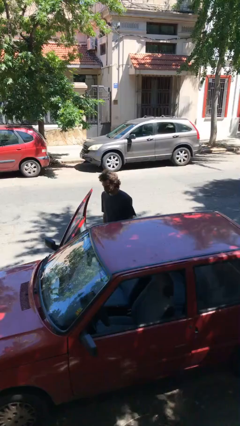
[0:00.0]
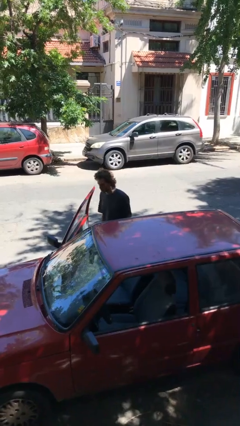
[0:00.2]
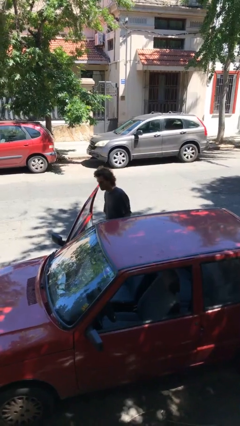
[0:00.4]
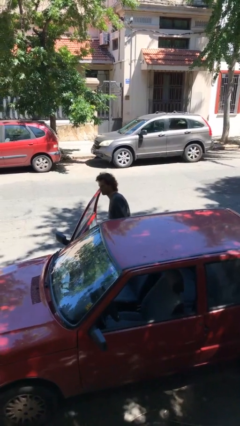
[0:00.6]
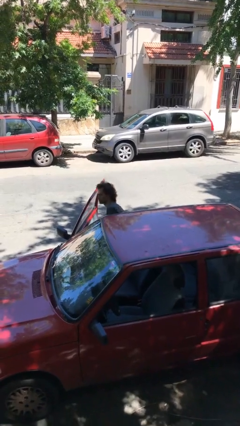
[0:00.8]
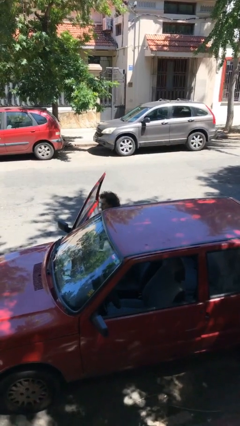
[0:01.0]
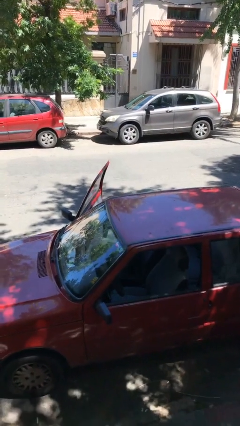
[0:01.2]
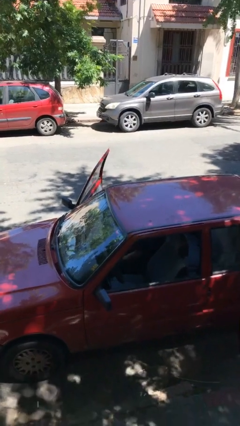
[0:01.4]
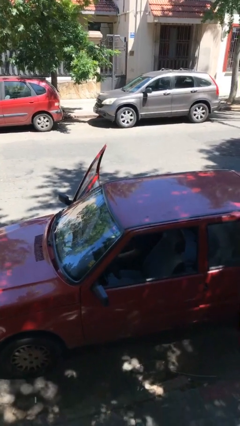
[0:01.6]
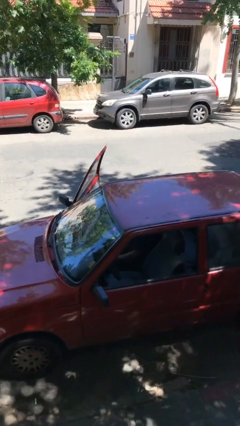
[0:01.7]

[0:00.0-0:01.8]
person enters car

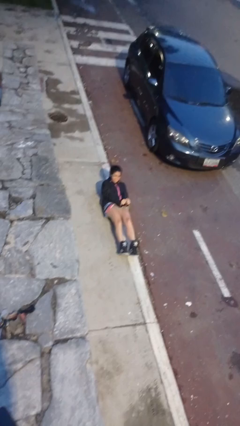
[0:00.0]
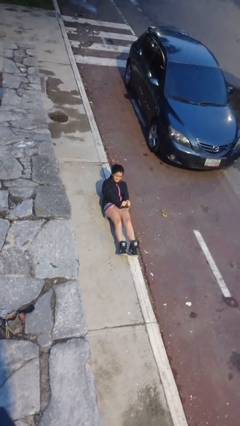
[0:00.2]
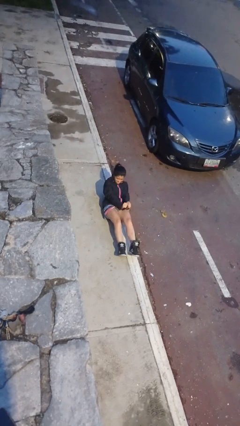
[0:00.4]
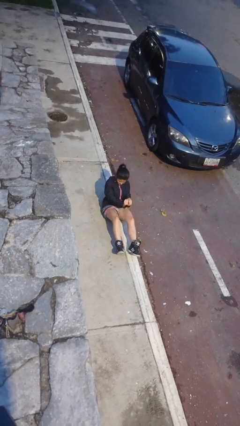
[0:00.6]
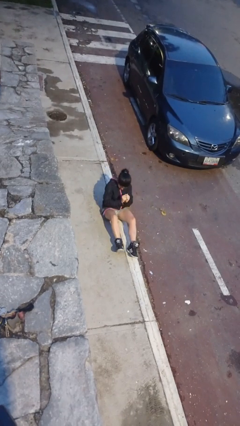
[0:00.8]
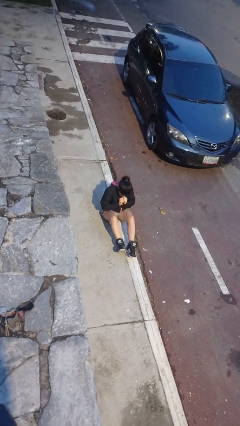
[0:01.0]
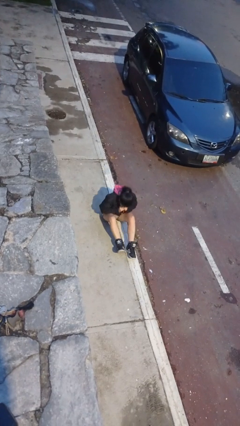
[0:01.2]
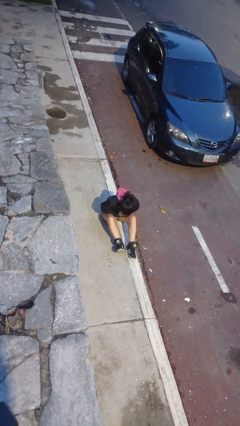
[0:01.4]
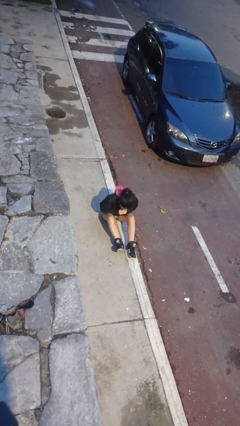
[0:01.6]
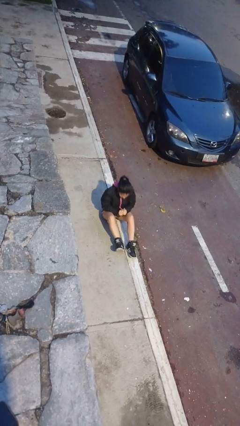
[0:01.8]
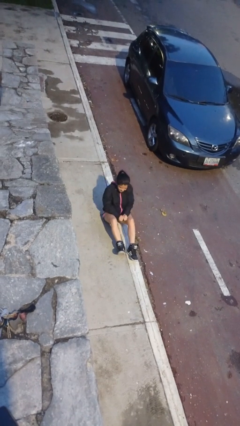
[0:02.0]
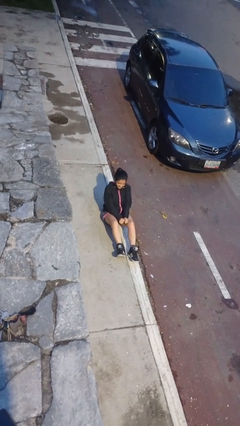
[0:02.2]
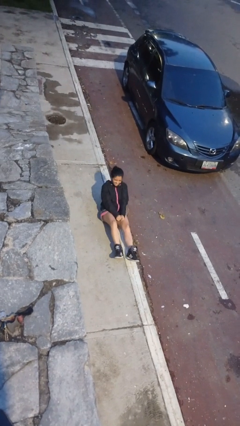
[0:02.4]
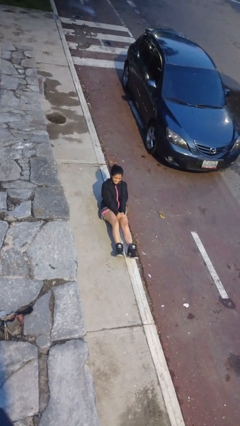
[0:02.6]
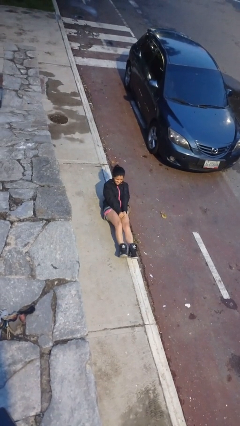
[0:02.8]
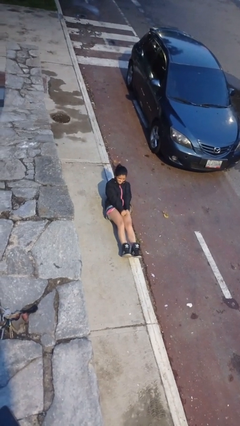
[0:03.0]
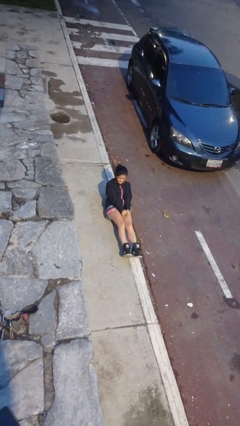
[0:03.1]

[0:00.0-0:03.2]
person exercises with situp

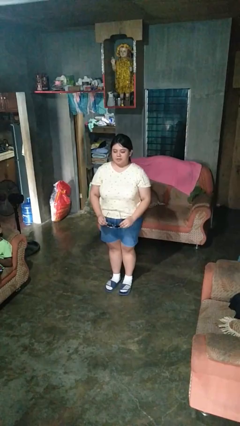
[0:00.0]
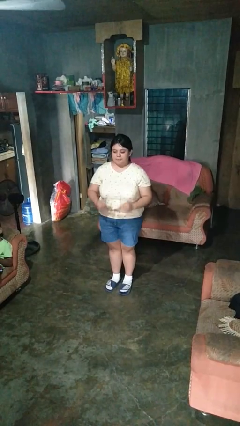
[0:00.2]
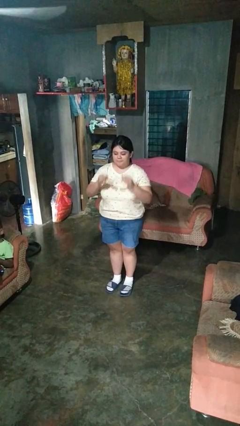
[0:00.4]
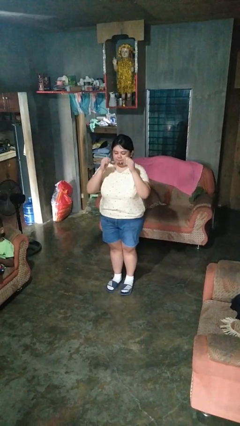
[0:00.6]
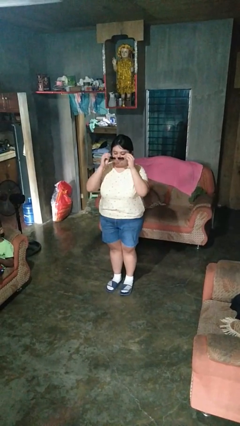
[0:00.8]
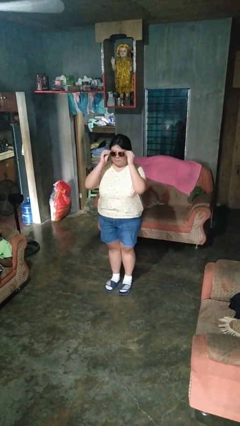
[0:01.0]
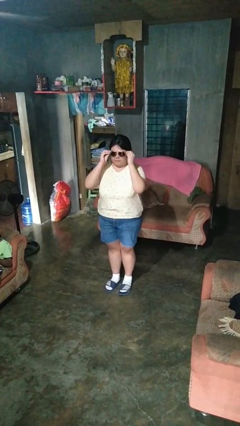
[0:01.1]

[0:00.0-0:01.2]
person puts on sunglasses

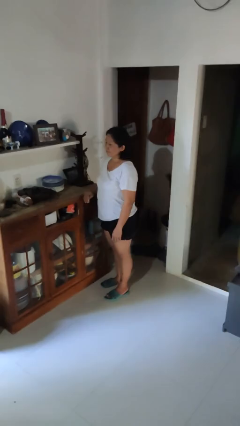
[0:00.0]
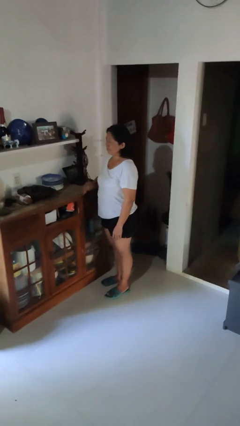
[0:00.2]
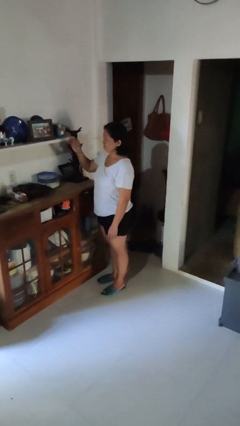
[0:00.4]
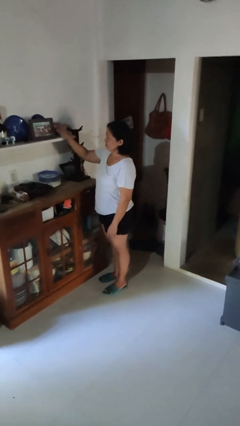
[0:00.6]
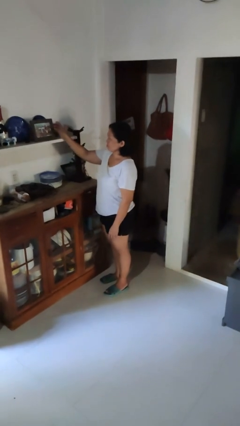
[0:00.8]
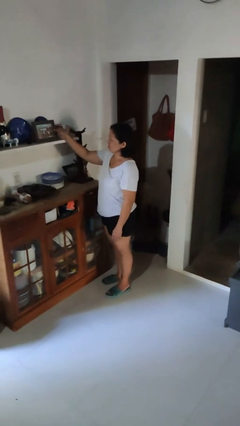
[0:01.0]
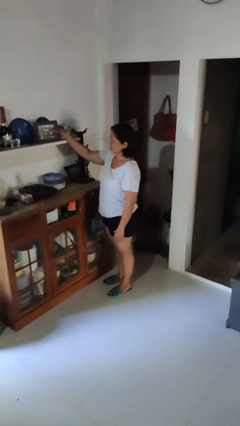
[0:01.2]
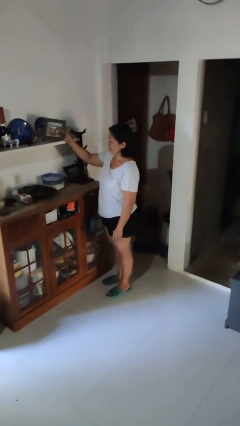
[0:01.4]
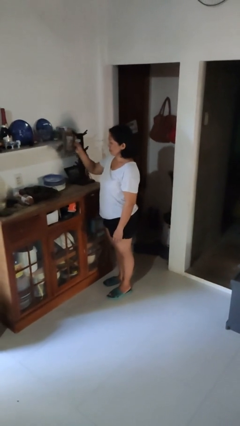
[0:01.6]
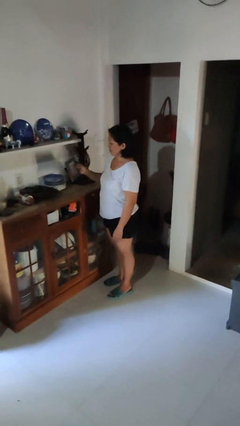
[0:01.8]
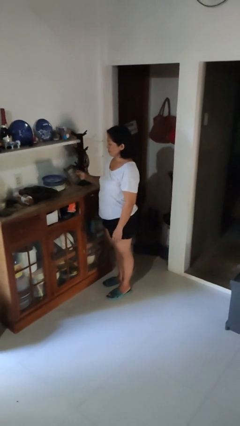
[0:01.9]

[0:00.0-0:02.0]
person picks up object from shelf

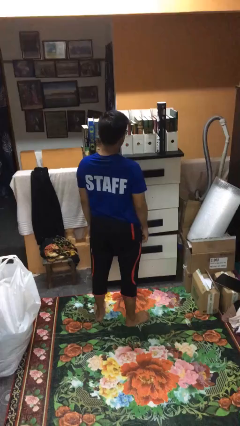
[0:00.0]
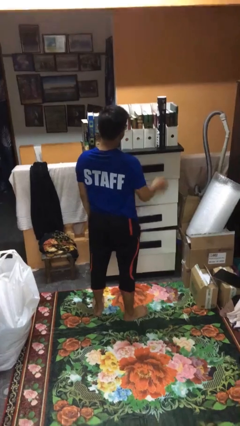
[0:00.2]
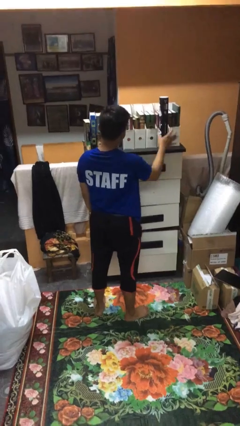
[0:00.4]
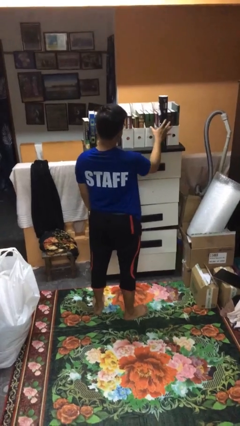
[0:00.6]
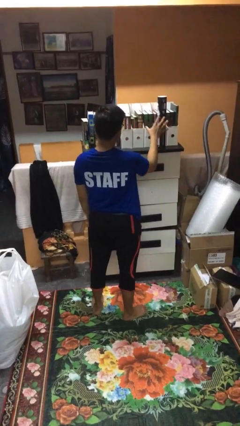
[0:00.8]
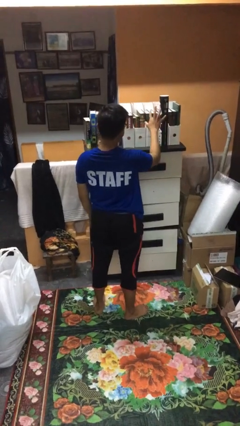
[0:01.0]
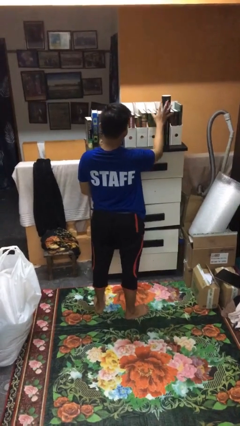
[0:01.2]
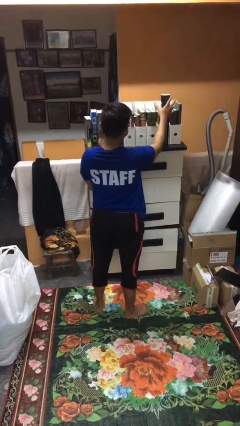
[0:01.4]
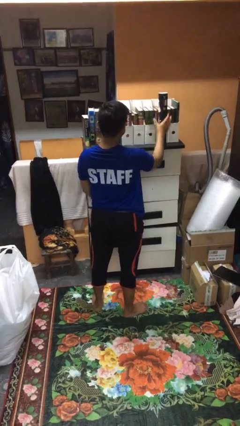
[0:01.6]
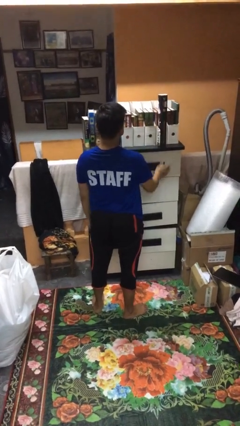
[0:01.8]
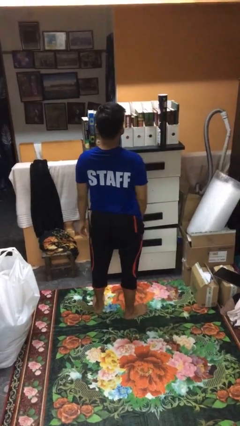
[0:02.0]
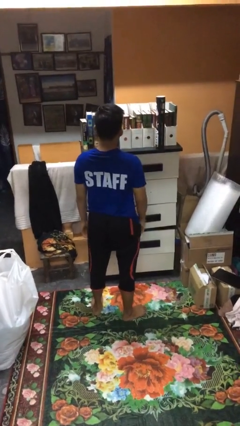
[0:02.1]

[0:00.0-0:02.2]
person waves hand over object

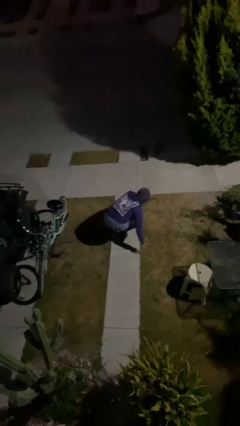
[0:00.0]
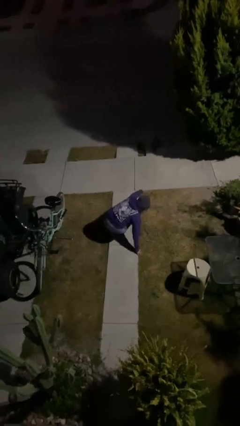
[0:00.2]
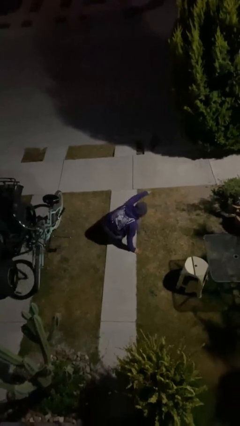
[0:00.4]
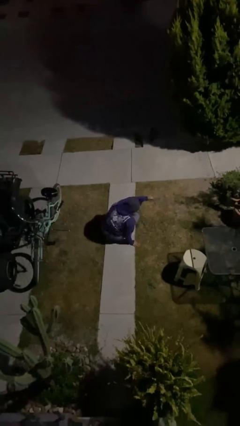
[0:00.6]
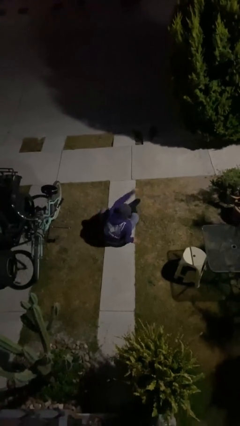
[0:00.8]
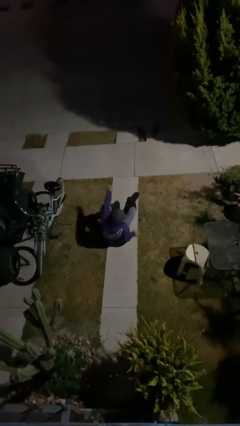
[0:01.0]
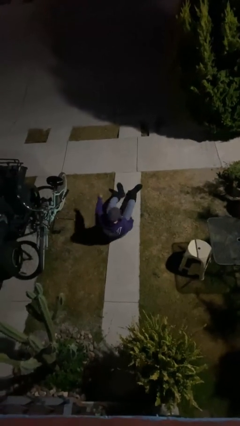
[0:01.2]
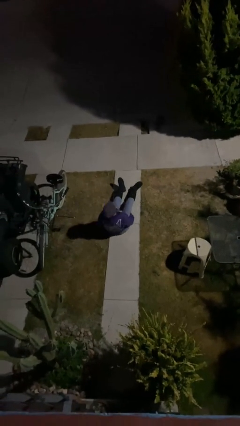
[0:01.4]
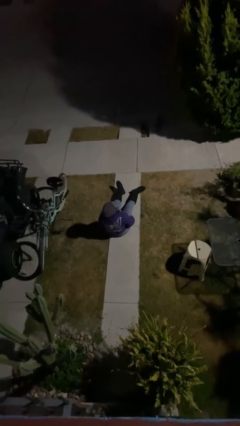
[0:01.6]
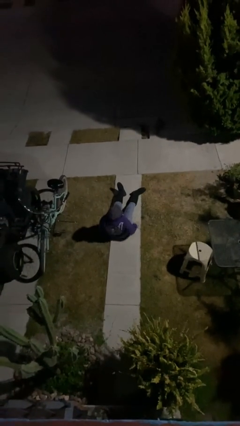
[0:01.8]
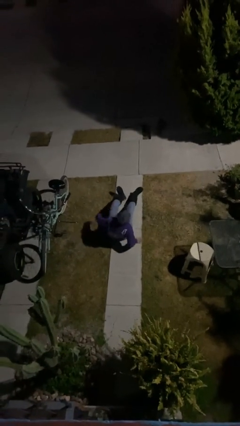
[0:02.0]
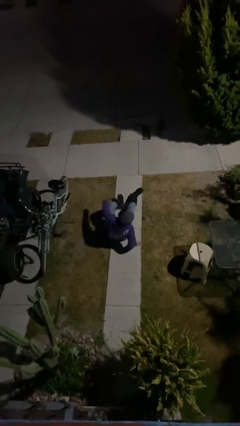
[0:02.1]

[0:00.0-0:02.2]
person sits down

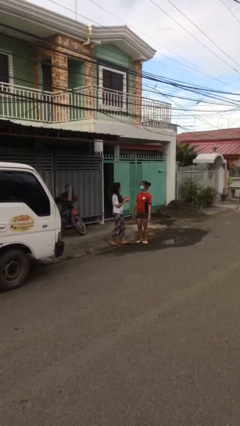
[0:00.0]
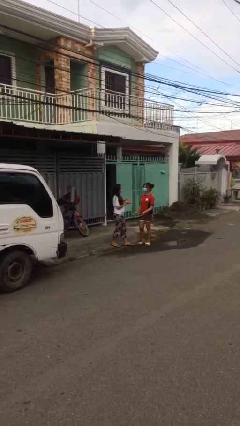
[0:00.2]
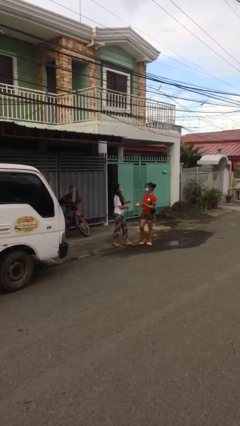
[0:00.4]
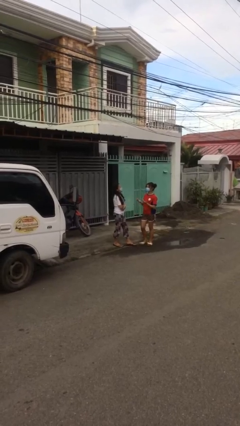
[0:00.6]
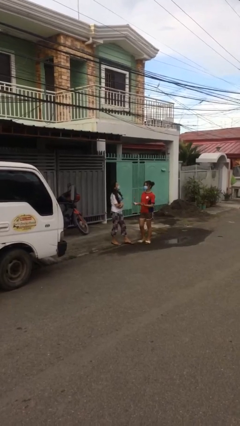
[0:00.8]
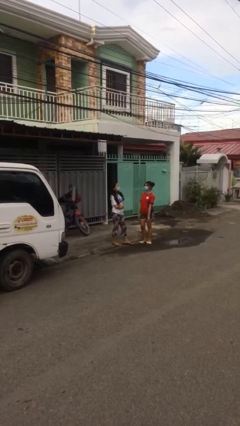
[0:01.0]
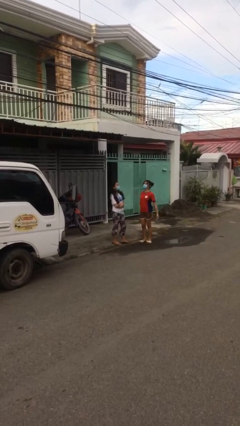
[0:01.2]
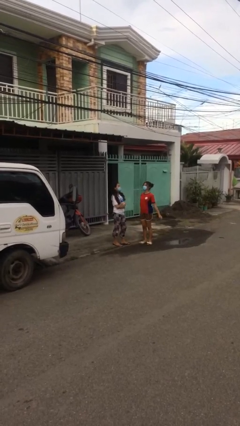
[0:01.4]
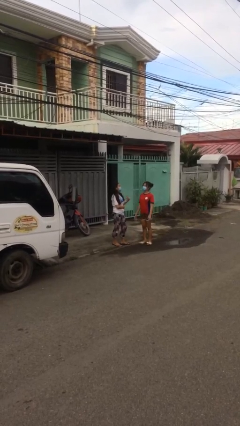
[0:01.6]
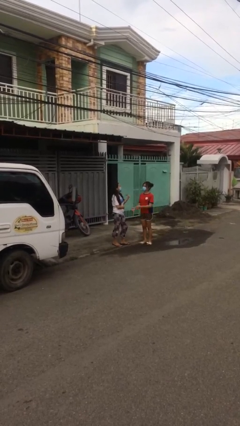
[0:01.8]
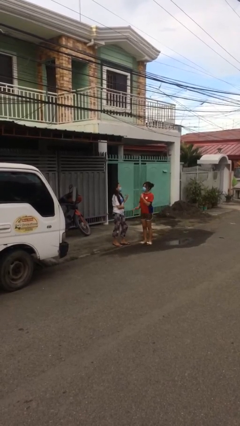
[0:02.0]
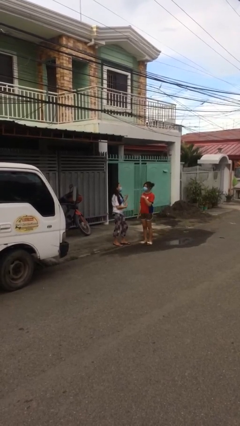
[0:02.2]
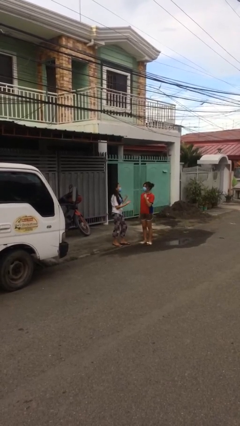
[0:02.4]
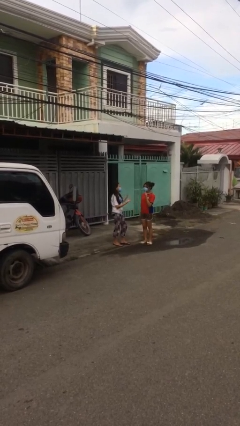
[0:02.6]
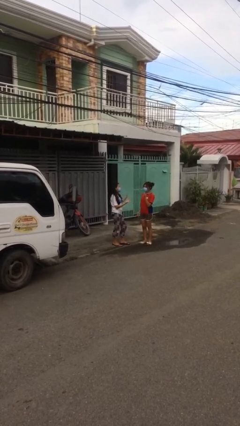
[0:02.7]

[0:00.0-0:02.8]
person talks to person

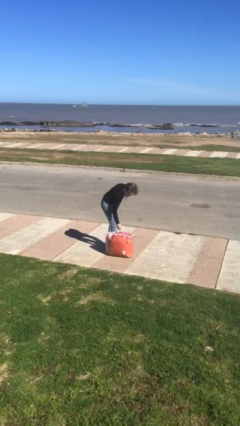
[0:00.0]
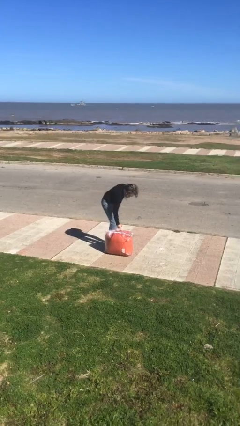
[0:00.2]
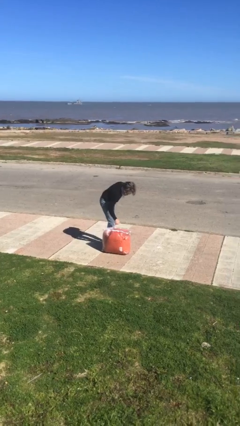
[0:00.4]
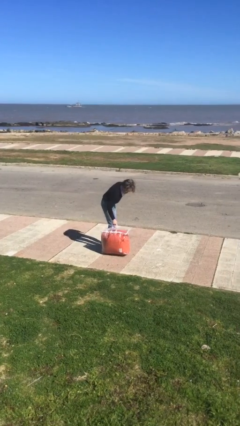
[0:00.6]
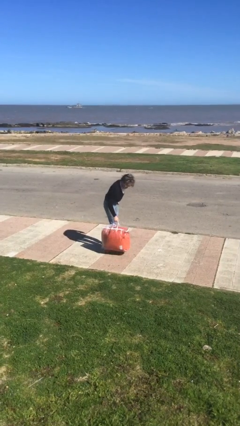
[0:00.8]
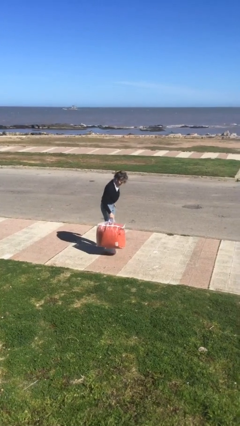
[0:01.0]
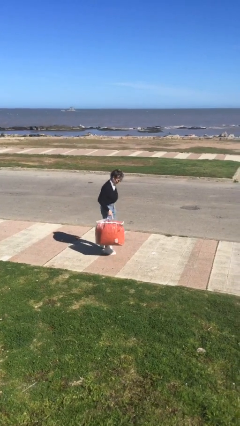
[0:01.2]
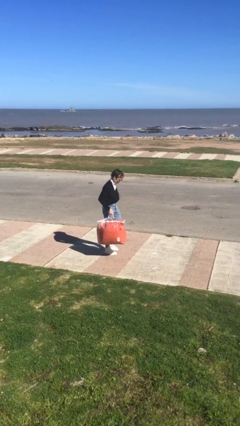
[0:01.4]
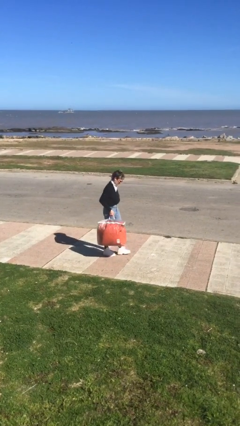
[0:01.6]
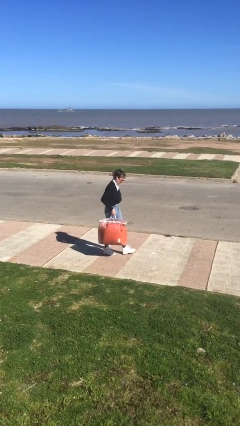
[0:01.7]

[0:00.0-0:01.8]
person picks up object from floor
